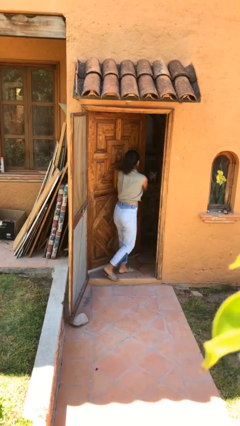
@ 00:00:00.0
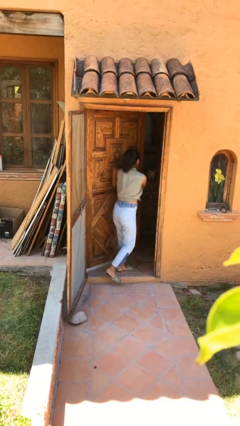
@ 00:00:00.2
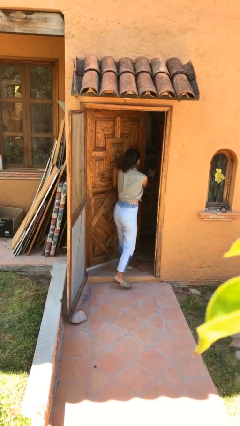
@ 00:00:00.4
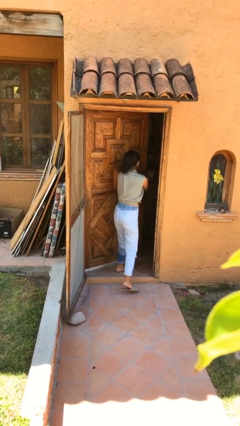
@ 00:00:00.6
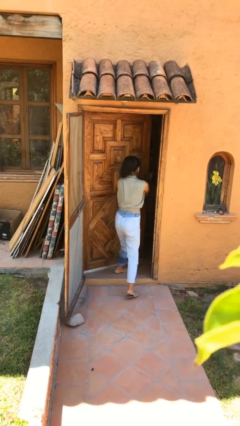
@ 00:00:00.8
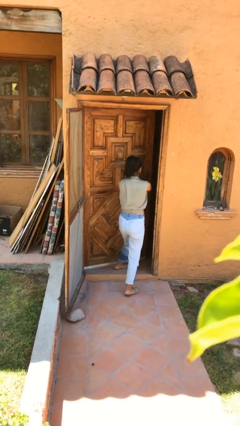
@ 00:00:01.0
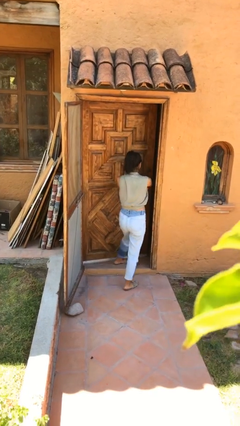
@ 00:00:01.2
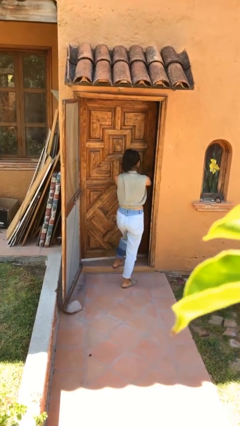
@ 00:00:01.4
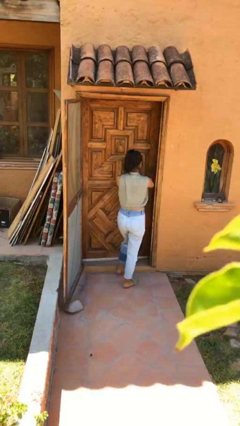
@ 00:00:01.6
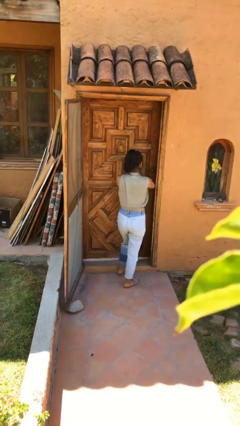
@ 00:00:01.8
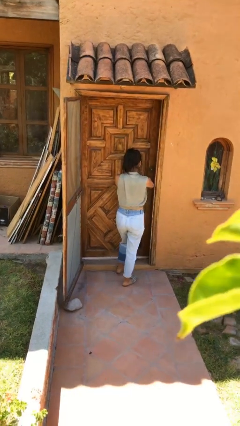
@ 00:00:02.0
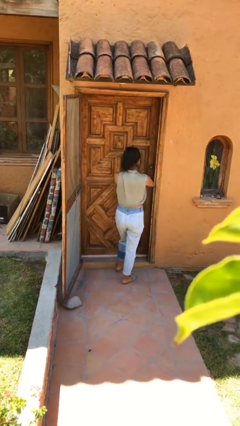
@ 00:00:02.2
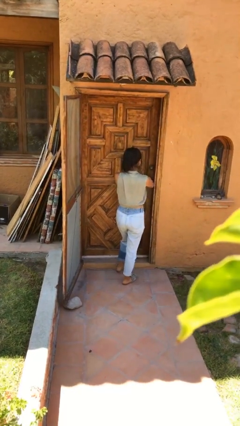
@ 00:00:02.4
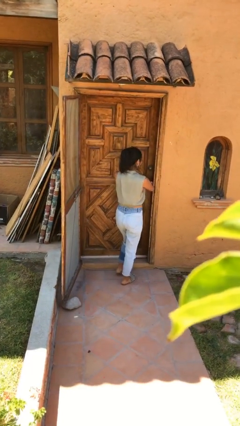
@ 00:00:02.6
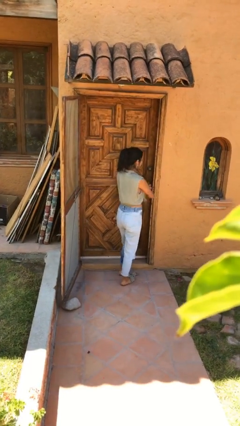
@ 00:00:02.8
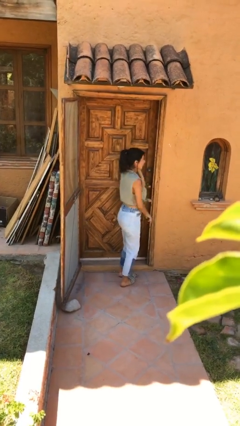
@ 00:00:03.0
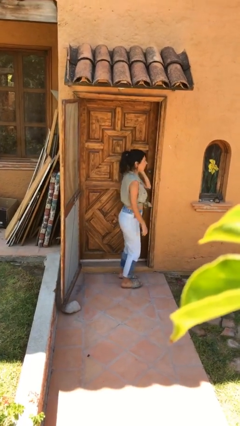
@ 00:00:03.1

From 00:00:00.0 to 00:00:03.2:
person closes facility door

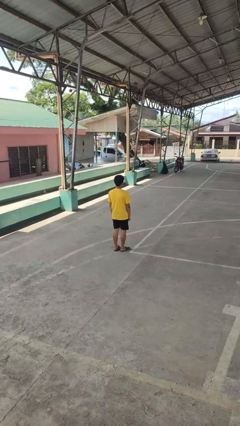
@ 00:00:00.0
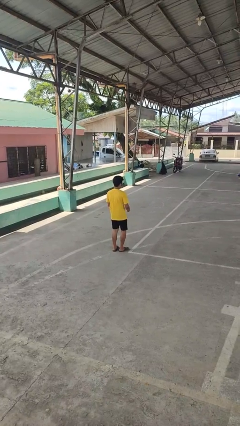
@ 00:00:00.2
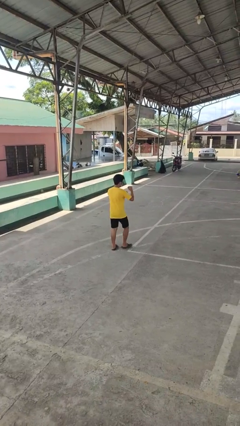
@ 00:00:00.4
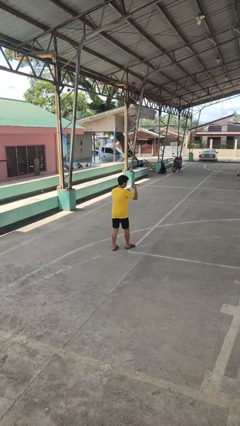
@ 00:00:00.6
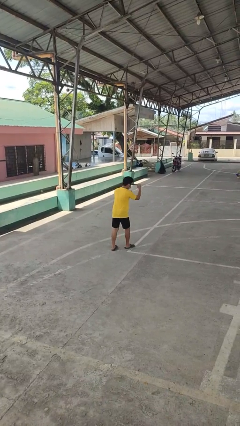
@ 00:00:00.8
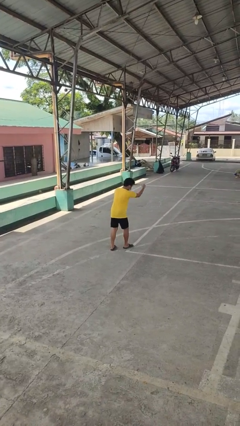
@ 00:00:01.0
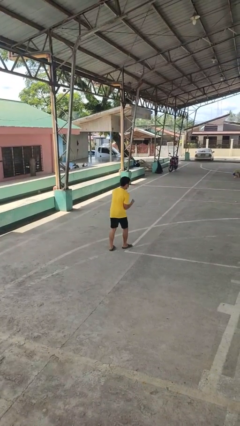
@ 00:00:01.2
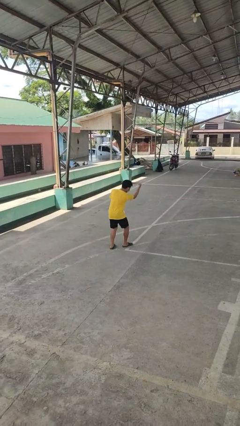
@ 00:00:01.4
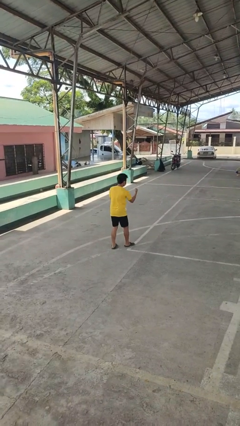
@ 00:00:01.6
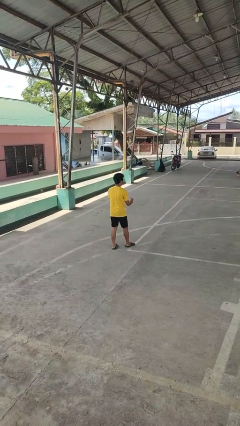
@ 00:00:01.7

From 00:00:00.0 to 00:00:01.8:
person punches

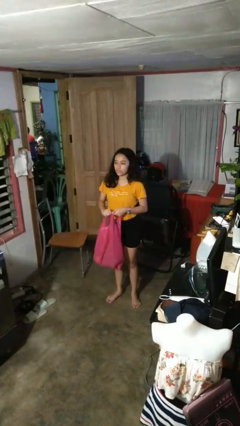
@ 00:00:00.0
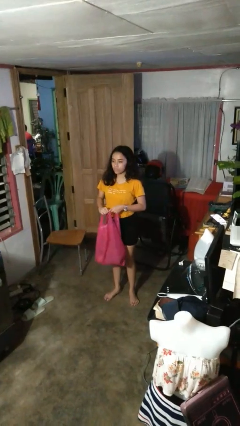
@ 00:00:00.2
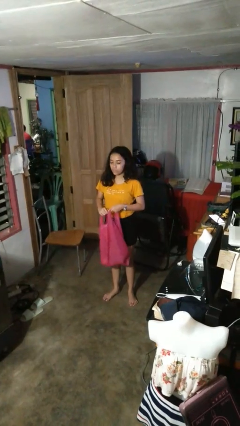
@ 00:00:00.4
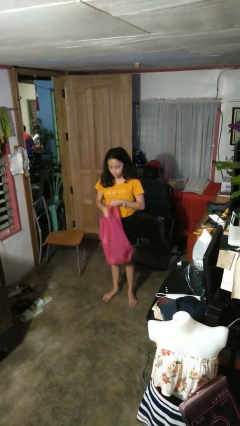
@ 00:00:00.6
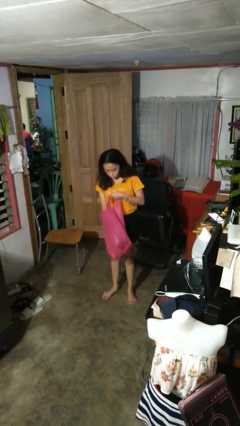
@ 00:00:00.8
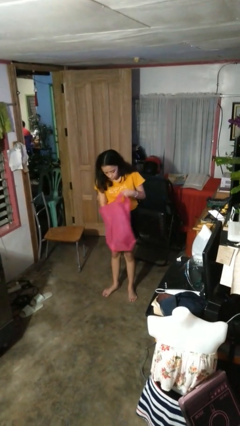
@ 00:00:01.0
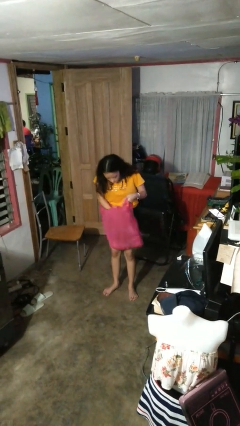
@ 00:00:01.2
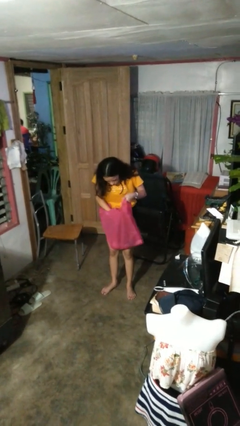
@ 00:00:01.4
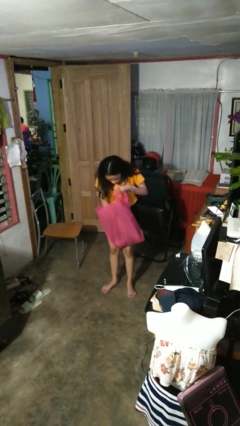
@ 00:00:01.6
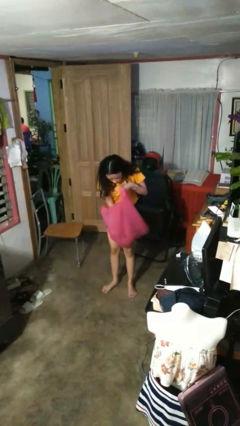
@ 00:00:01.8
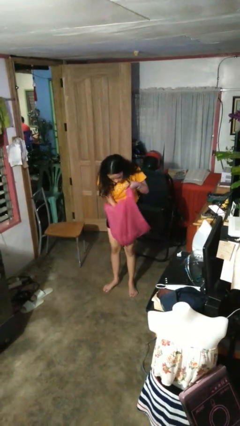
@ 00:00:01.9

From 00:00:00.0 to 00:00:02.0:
person searches in bag

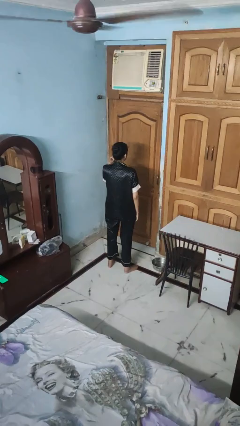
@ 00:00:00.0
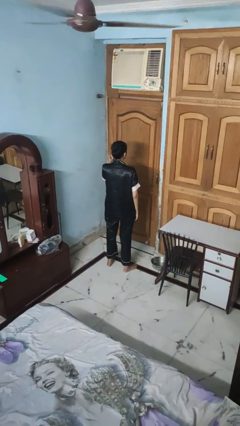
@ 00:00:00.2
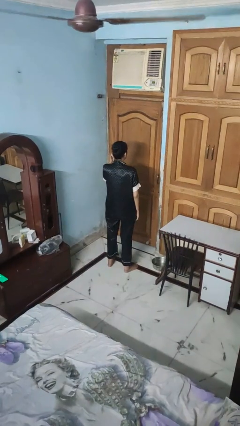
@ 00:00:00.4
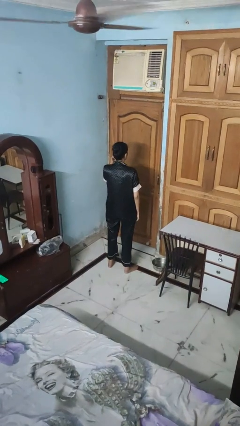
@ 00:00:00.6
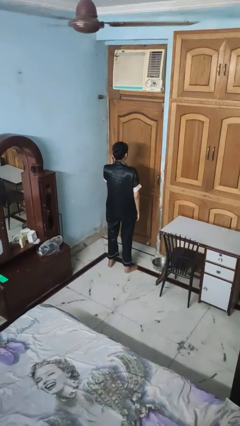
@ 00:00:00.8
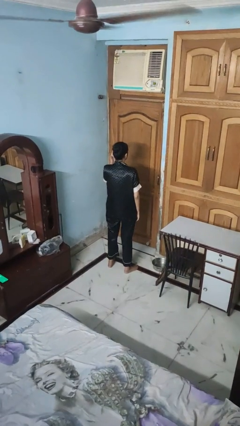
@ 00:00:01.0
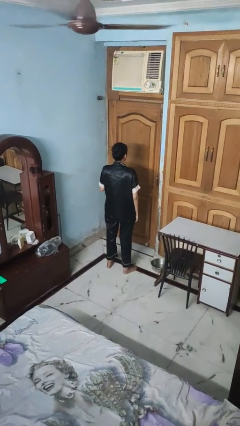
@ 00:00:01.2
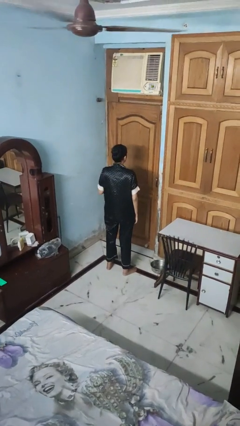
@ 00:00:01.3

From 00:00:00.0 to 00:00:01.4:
person touches earlobe

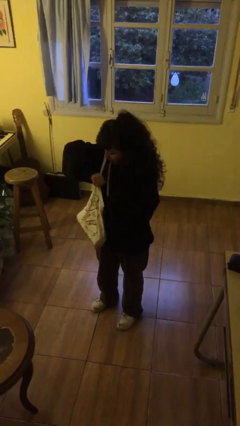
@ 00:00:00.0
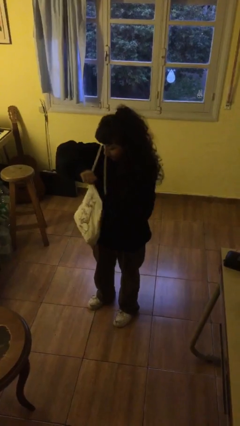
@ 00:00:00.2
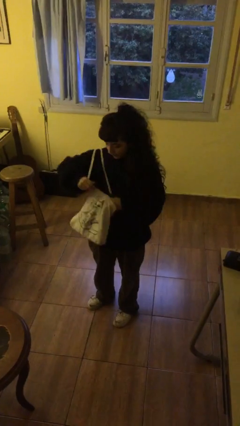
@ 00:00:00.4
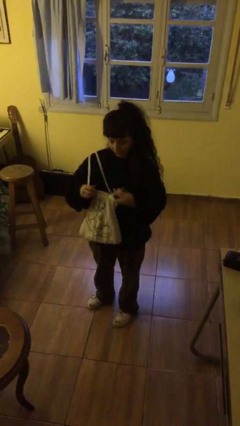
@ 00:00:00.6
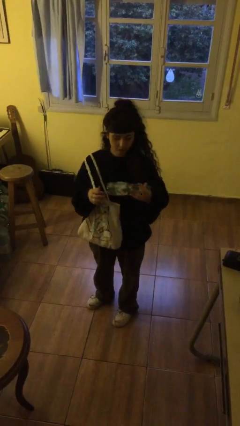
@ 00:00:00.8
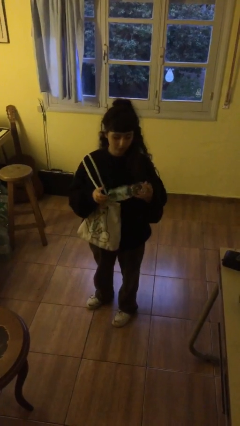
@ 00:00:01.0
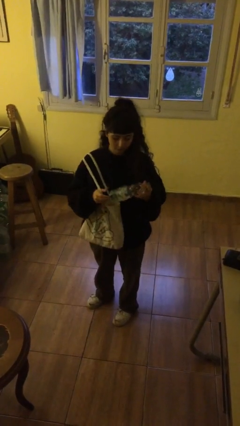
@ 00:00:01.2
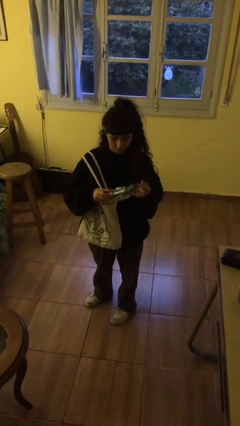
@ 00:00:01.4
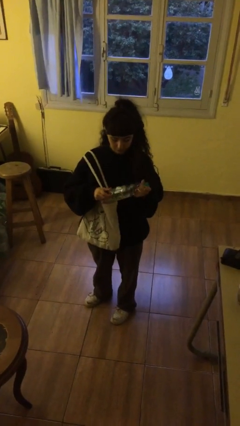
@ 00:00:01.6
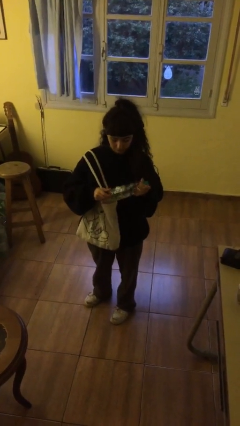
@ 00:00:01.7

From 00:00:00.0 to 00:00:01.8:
person takes object from purse

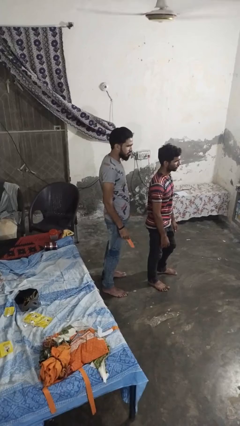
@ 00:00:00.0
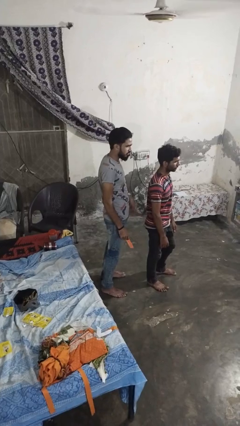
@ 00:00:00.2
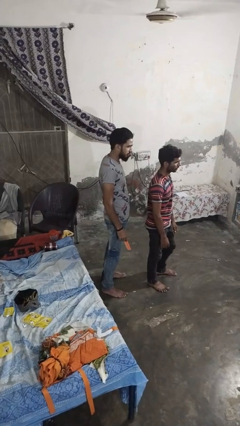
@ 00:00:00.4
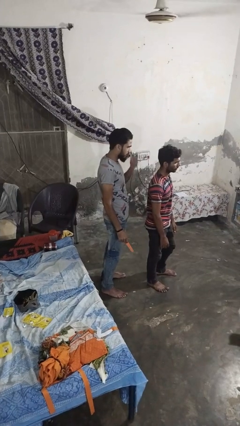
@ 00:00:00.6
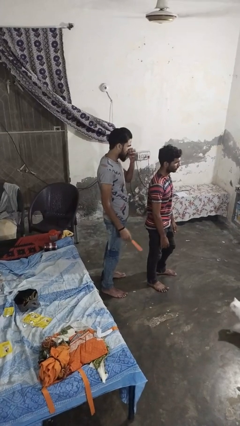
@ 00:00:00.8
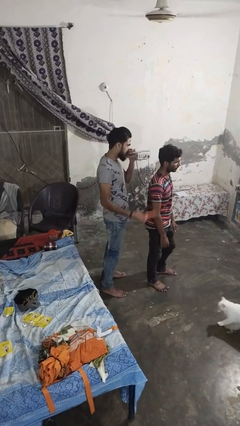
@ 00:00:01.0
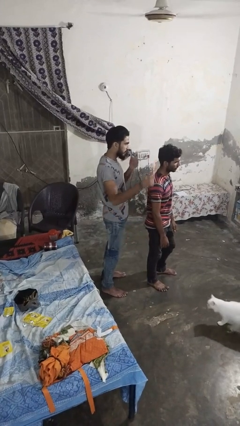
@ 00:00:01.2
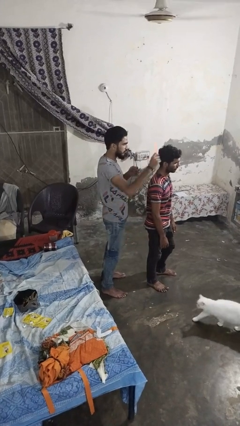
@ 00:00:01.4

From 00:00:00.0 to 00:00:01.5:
person brushes hair of person

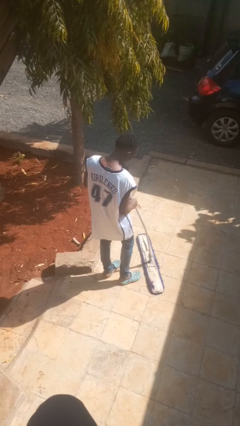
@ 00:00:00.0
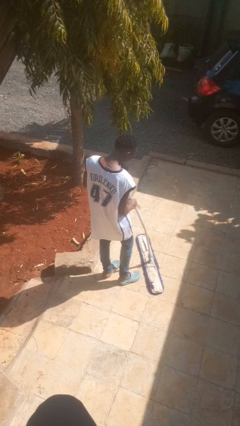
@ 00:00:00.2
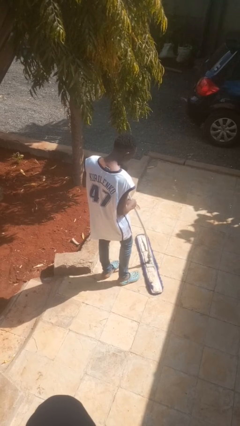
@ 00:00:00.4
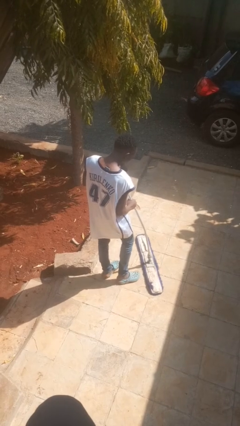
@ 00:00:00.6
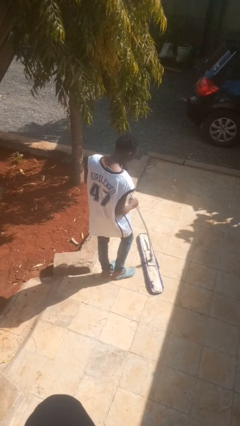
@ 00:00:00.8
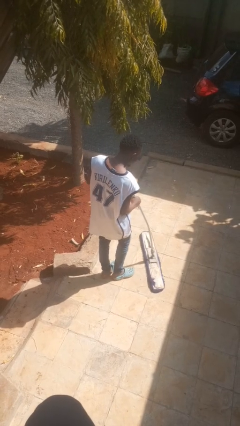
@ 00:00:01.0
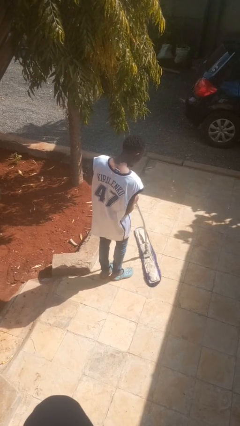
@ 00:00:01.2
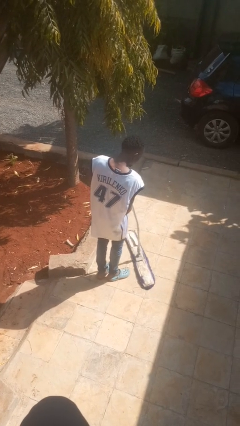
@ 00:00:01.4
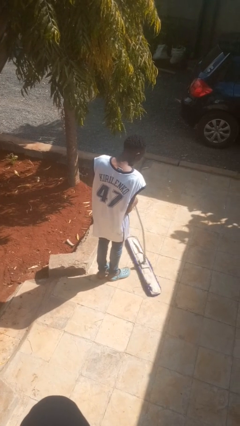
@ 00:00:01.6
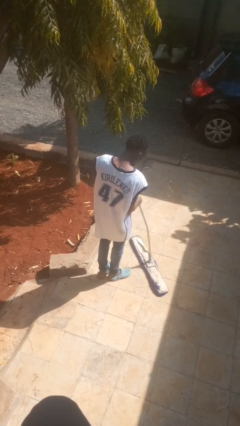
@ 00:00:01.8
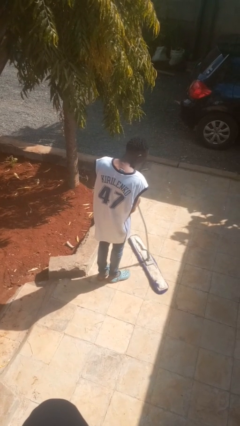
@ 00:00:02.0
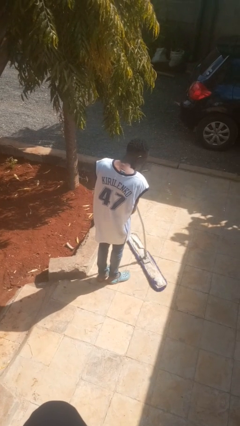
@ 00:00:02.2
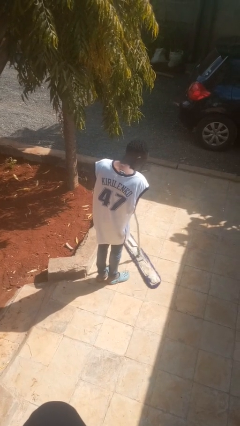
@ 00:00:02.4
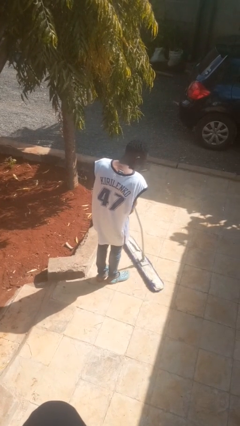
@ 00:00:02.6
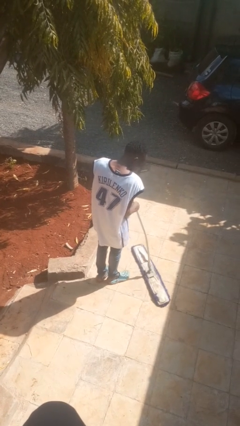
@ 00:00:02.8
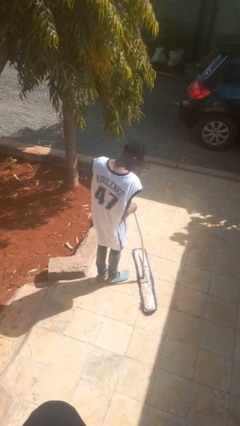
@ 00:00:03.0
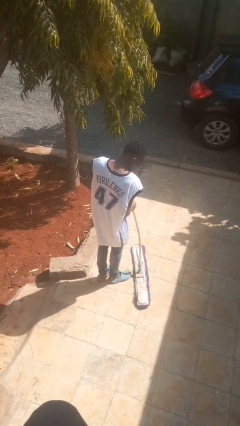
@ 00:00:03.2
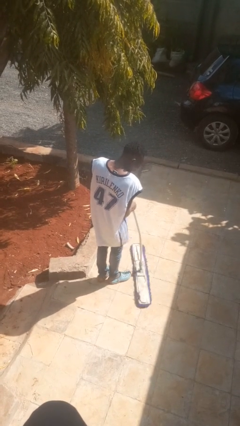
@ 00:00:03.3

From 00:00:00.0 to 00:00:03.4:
person mops

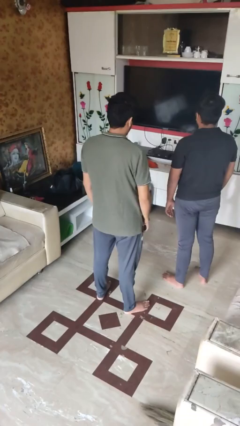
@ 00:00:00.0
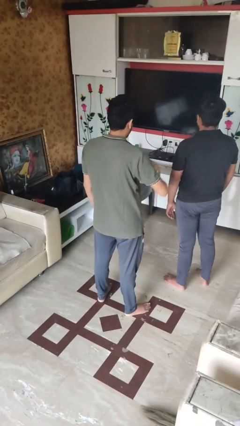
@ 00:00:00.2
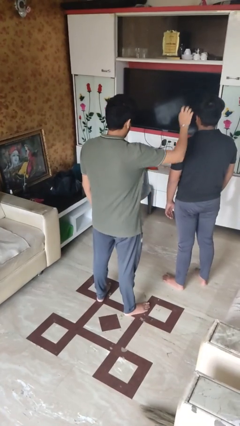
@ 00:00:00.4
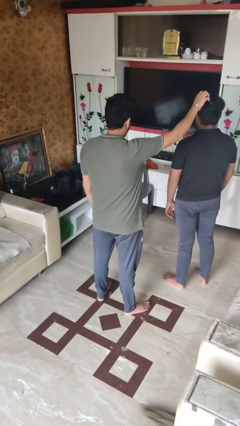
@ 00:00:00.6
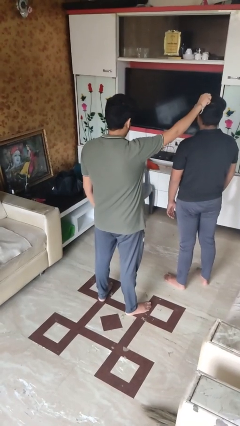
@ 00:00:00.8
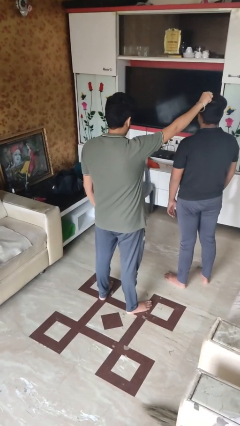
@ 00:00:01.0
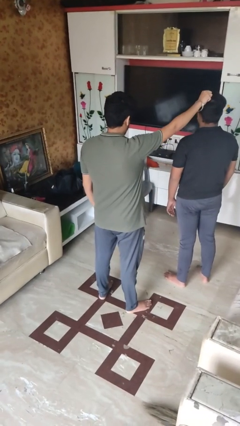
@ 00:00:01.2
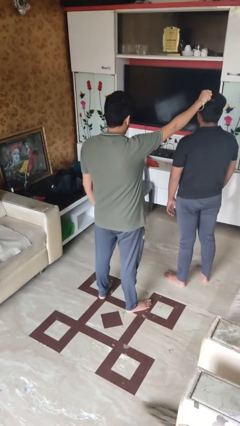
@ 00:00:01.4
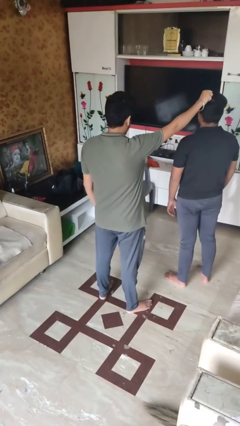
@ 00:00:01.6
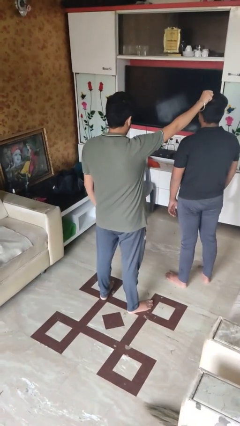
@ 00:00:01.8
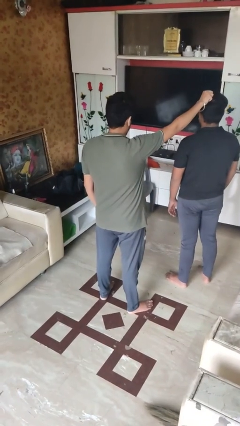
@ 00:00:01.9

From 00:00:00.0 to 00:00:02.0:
person grabs person by hair
